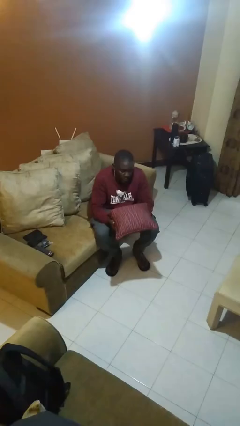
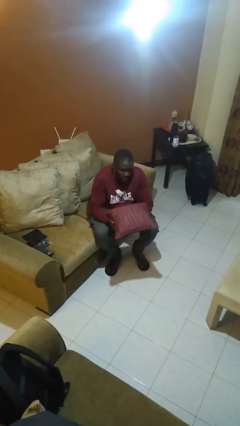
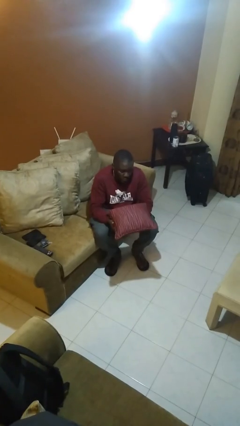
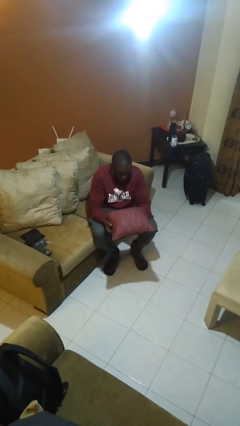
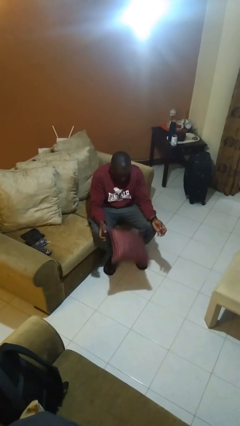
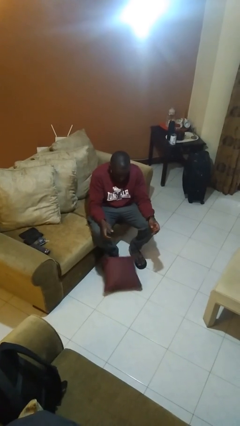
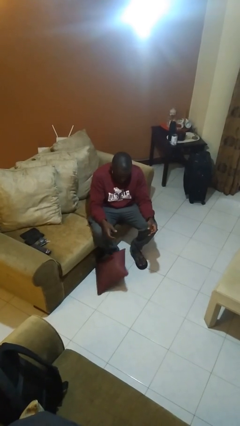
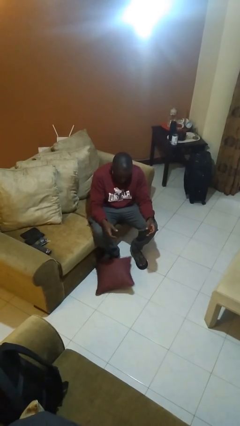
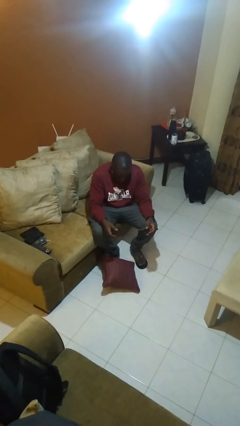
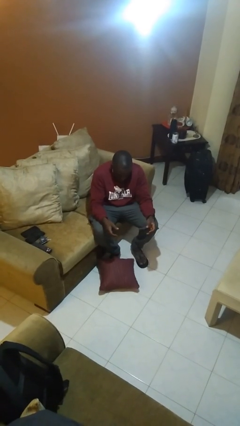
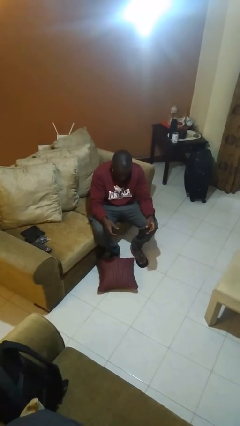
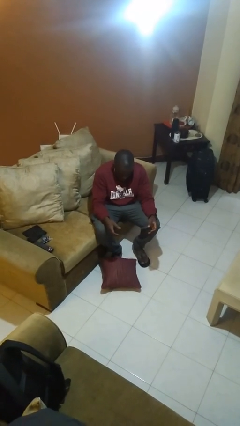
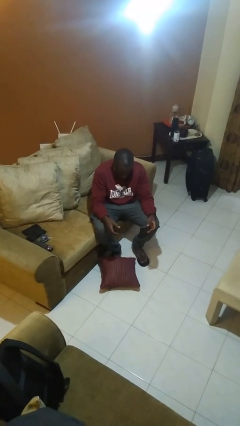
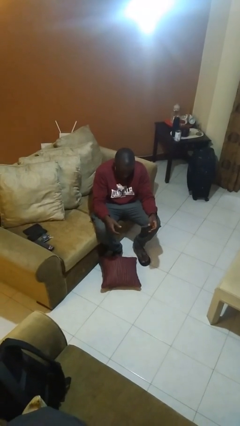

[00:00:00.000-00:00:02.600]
person drops object

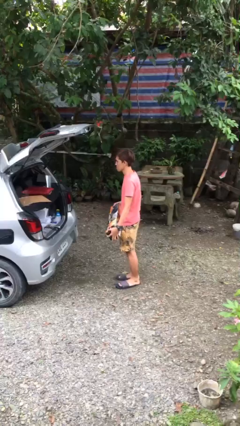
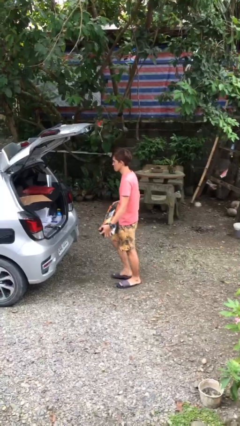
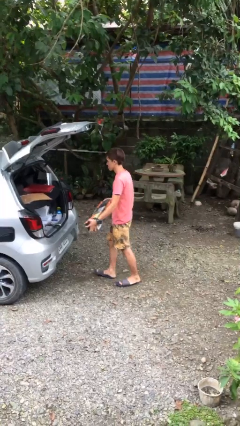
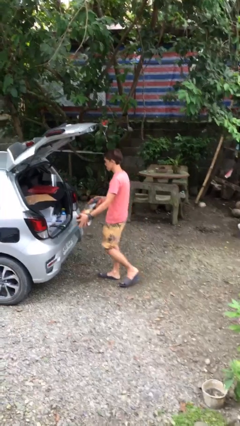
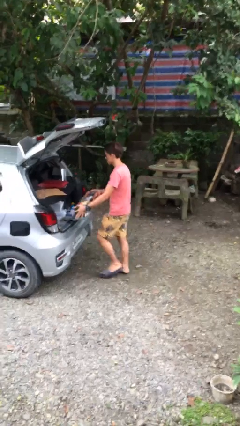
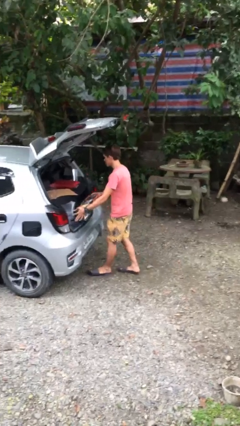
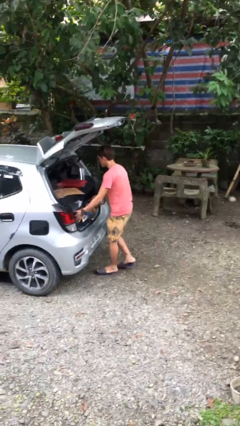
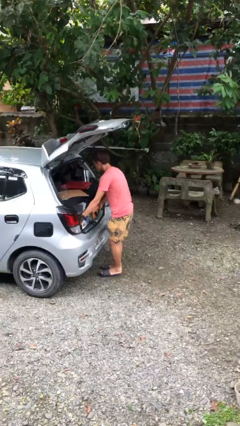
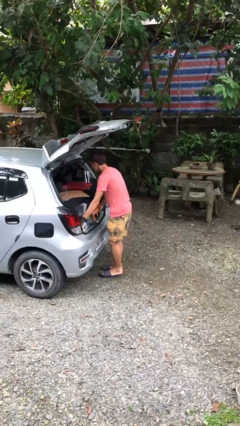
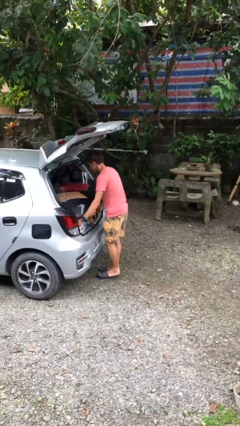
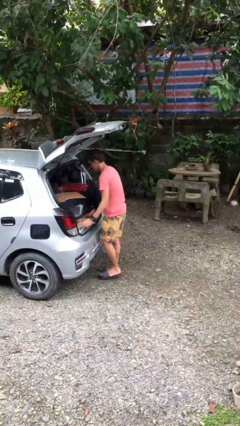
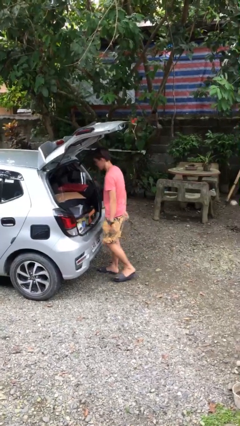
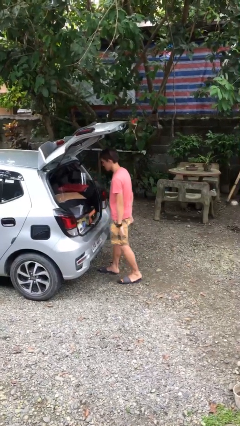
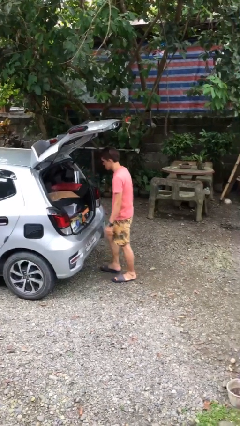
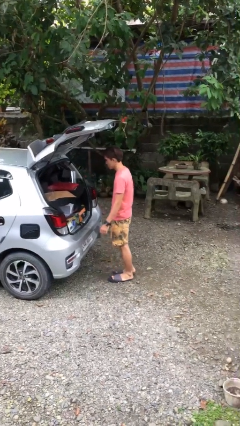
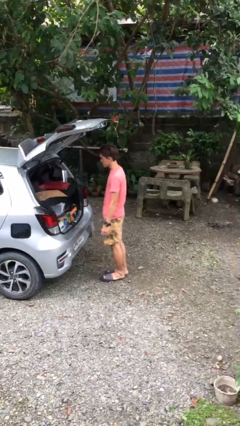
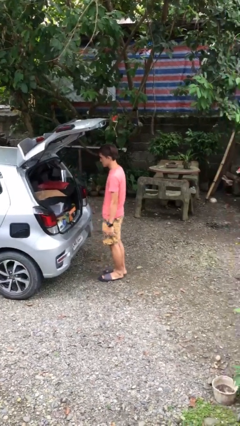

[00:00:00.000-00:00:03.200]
person loads car

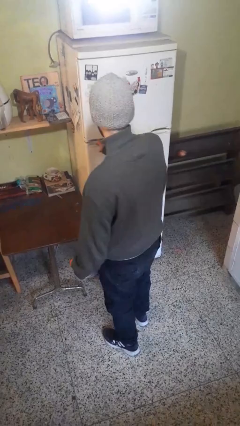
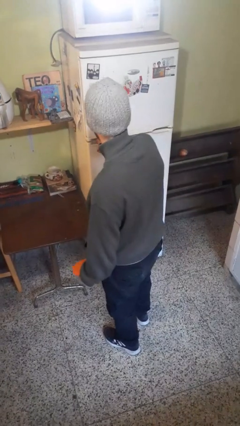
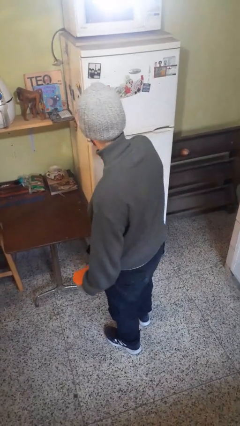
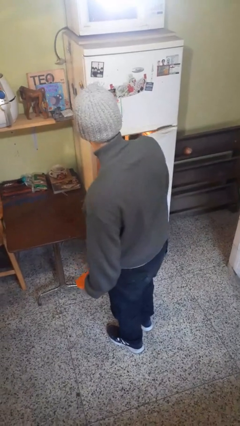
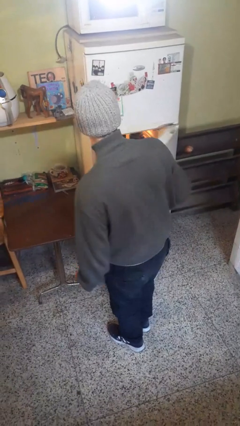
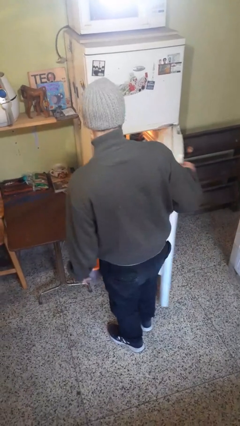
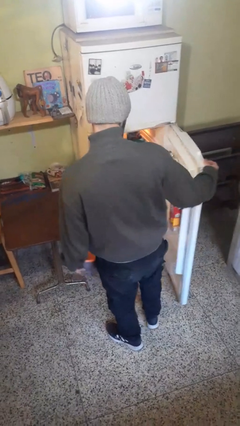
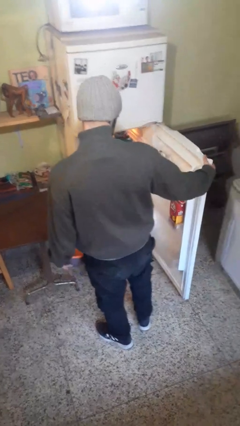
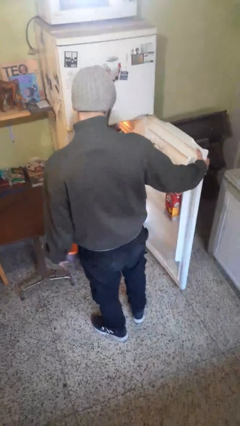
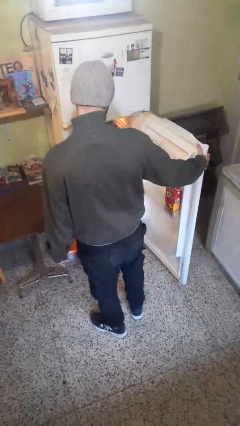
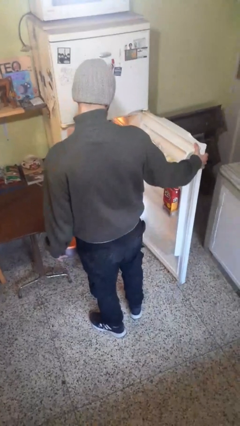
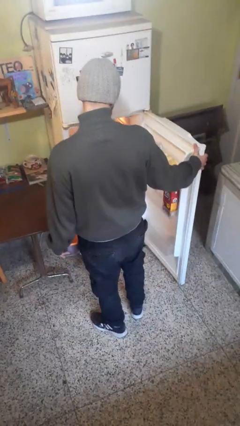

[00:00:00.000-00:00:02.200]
person opens refrigerator

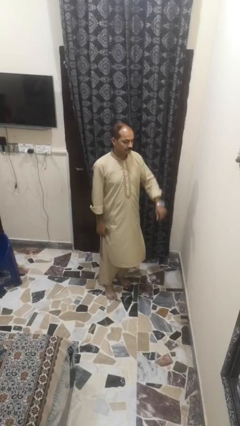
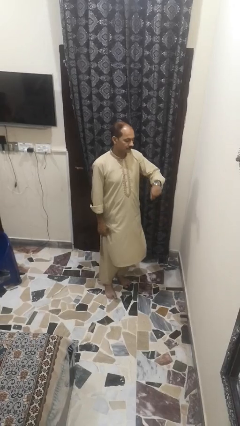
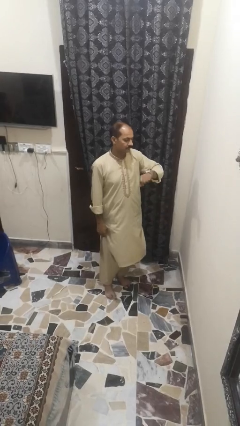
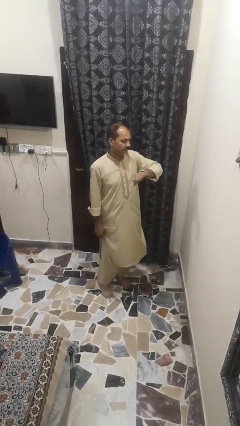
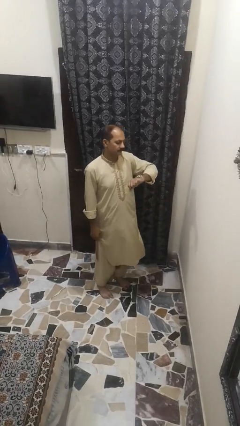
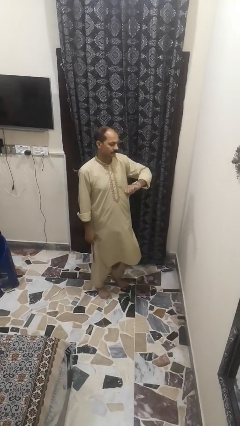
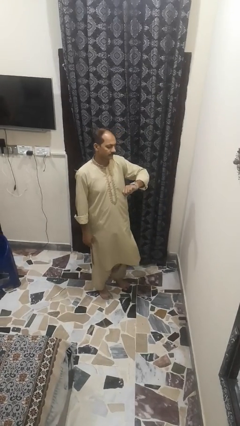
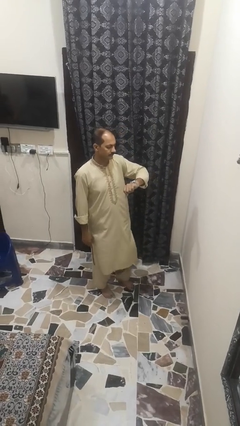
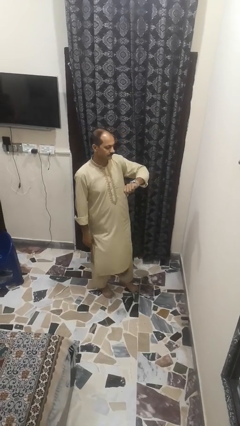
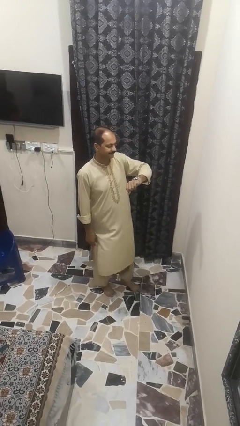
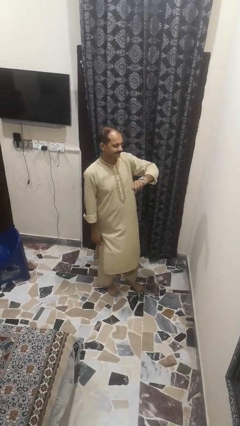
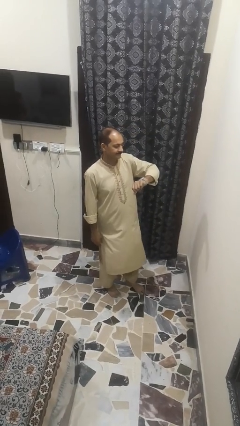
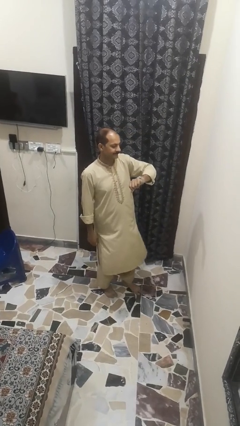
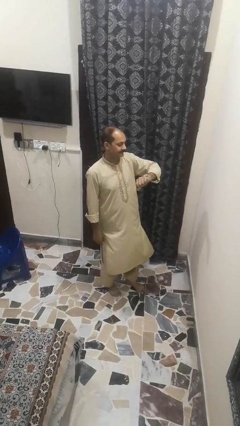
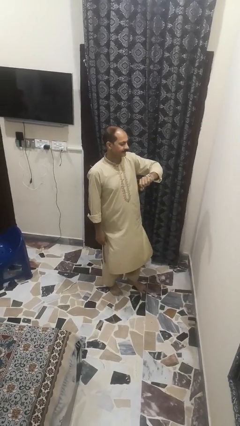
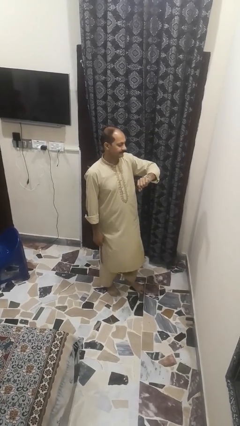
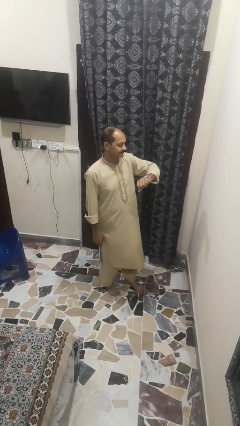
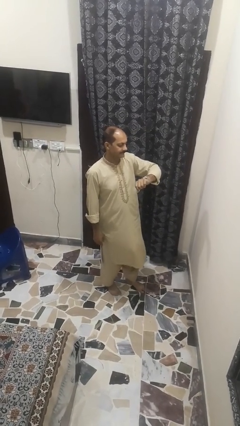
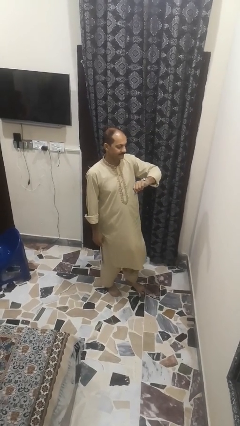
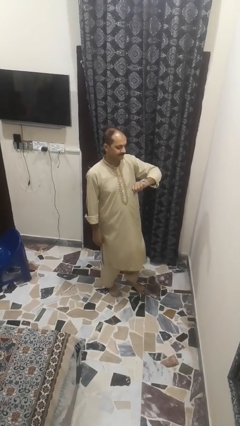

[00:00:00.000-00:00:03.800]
person looks at wristwatch

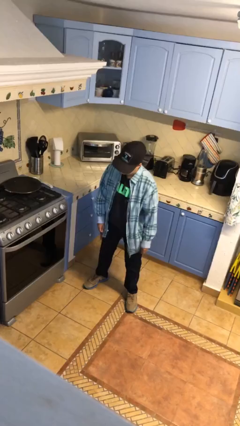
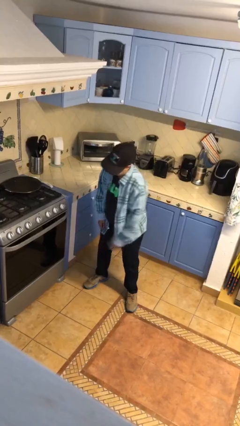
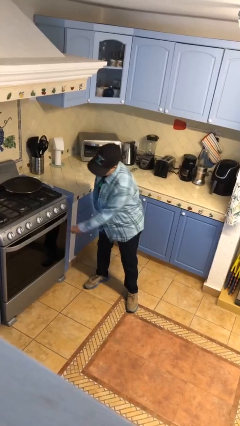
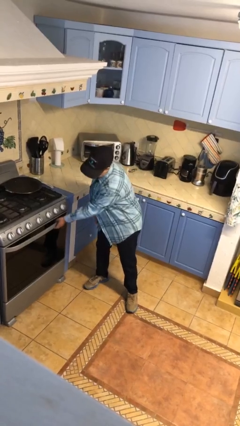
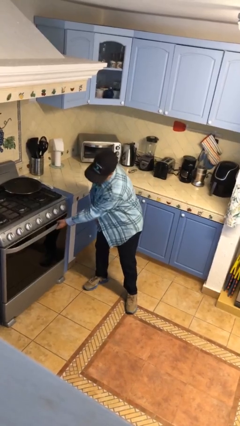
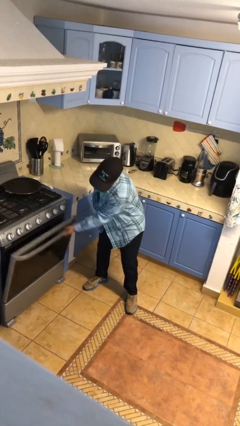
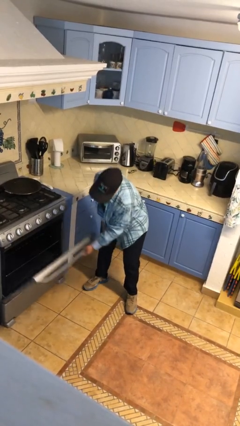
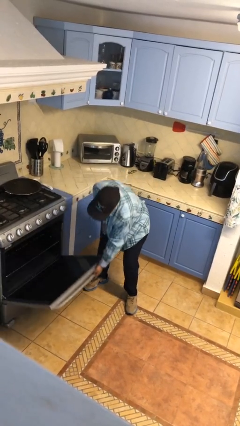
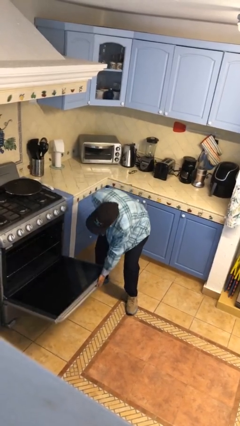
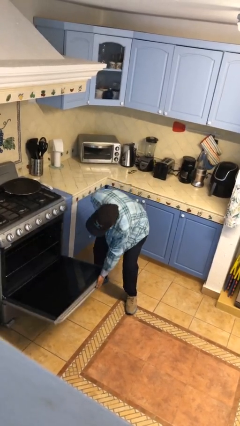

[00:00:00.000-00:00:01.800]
person opens oven door

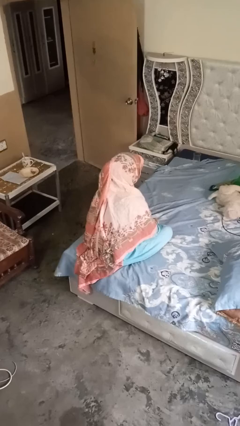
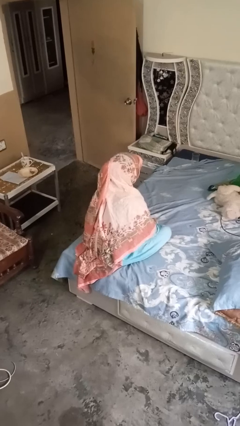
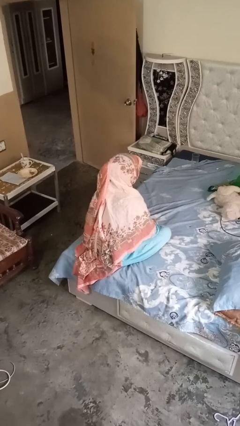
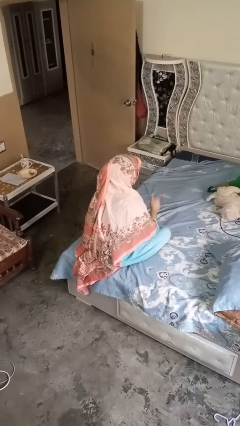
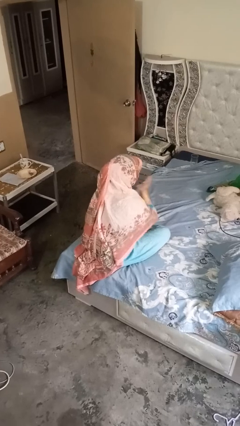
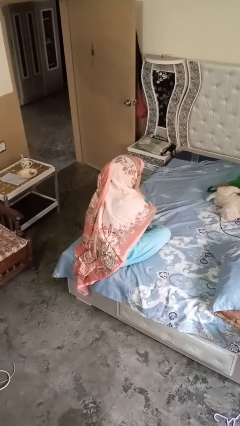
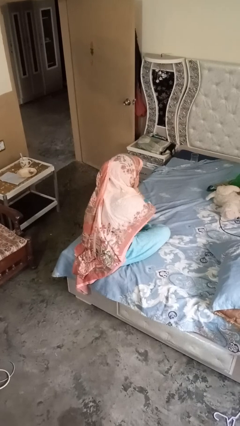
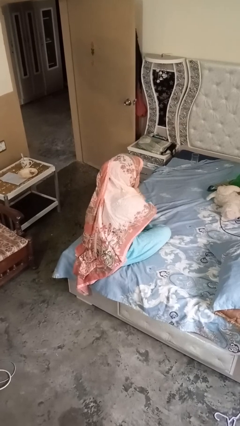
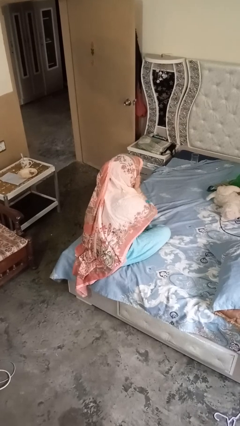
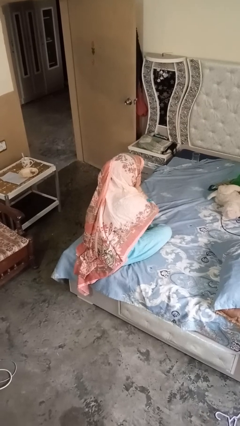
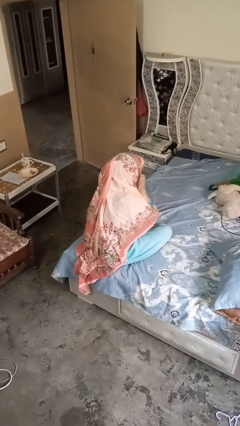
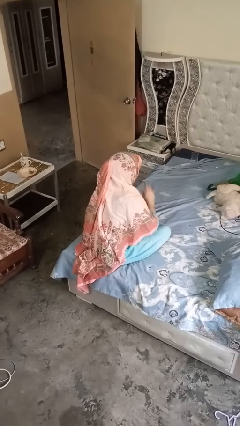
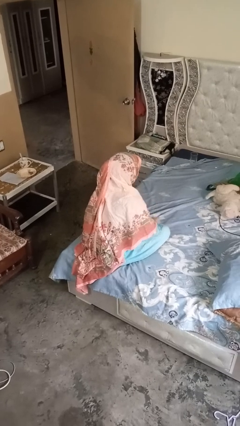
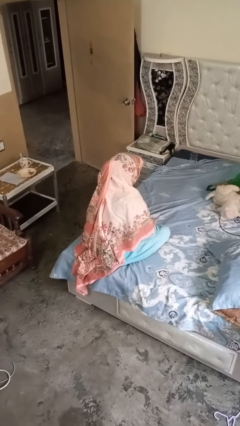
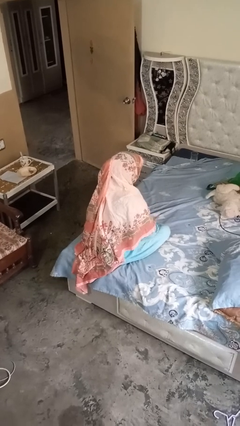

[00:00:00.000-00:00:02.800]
person strokes chin

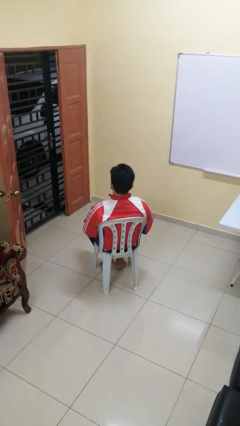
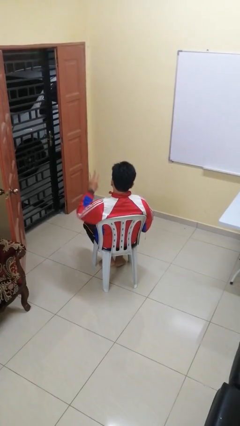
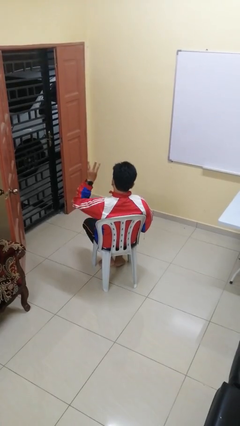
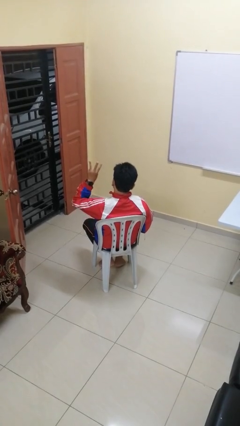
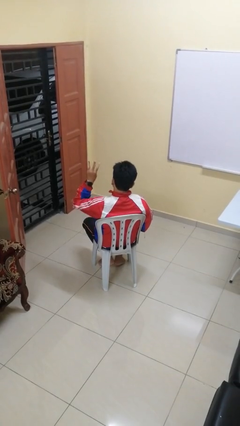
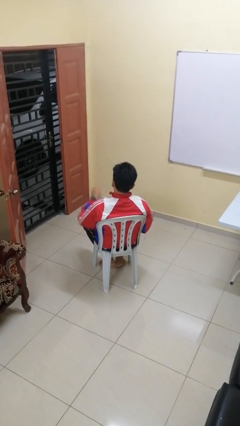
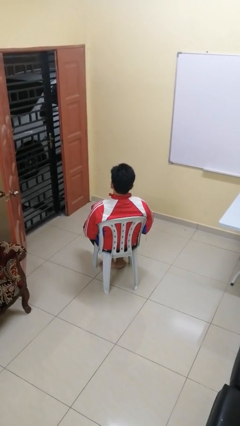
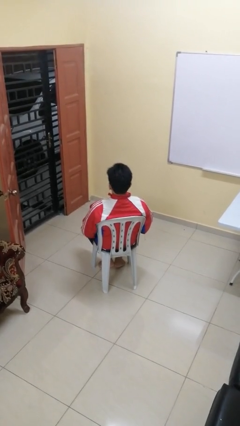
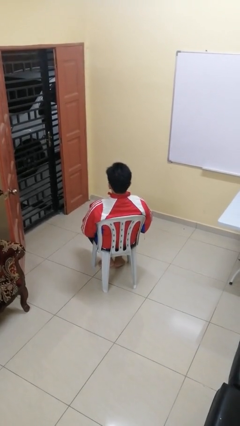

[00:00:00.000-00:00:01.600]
person gestures number three
